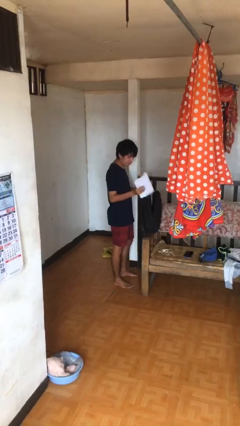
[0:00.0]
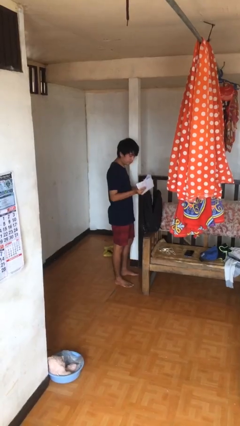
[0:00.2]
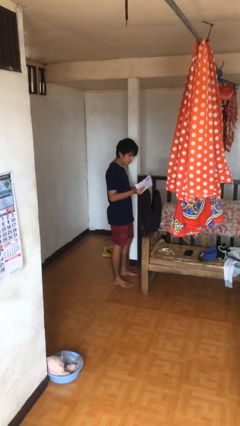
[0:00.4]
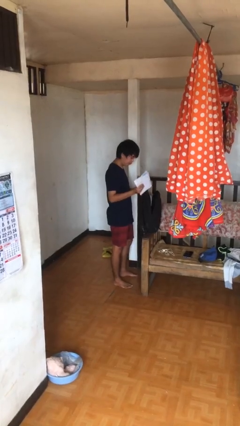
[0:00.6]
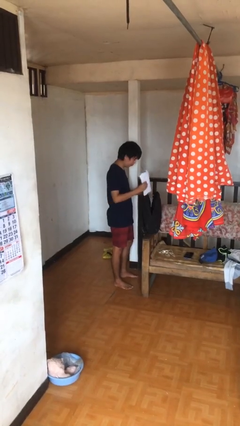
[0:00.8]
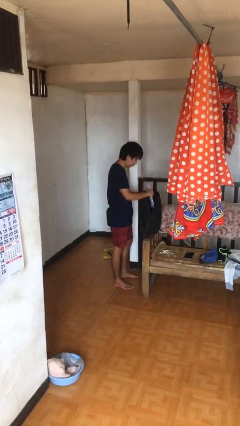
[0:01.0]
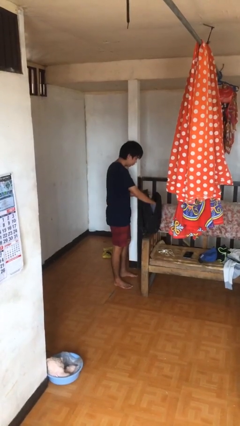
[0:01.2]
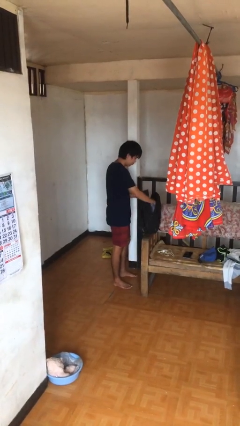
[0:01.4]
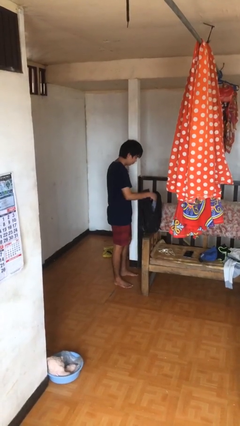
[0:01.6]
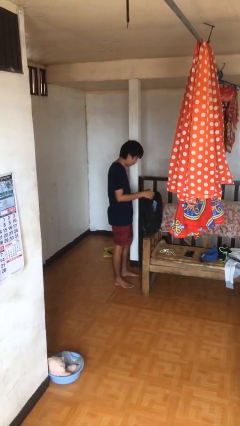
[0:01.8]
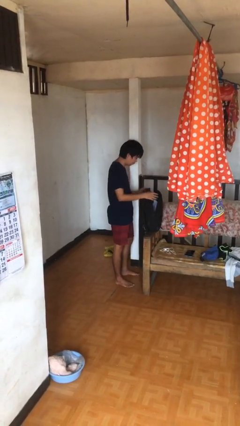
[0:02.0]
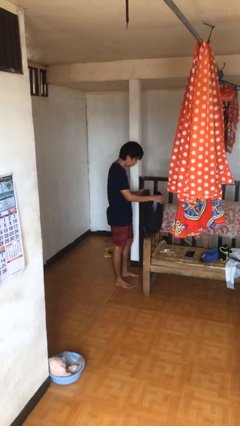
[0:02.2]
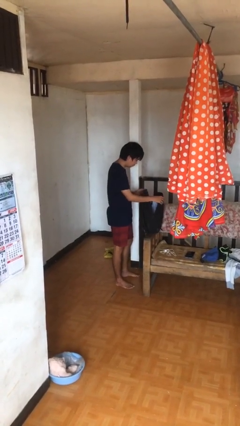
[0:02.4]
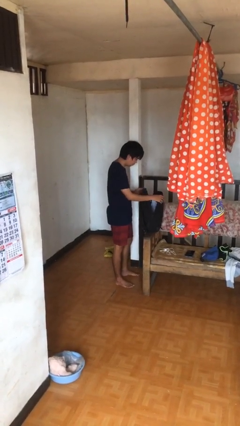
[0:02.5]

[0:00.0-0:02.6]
person puts object into backpack

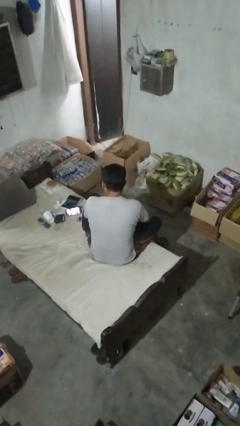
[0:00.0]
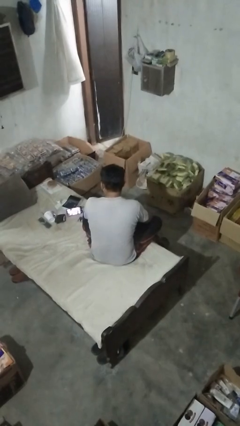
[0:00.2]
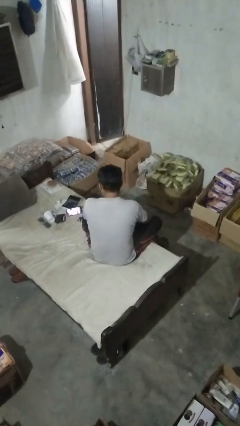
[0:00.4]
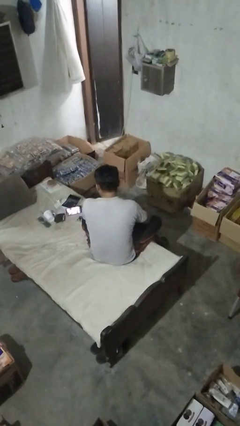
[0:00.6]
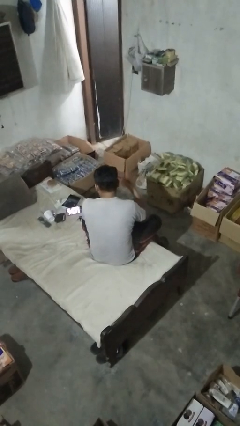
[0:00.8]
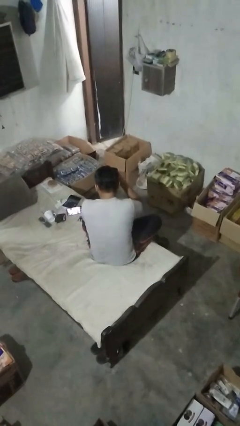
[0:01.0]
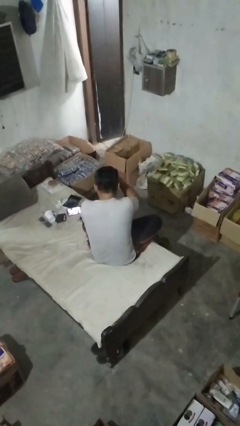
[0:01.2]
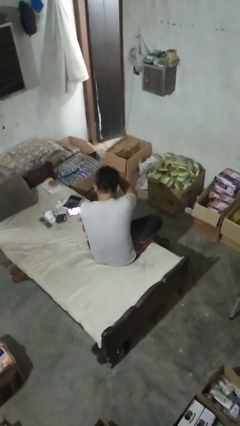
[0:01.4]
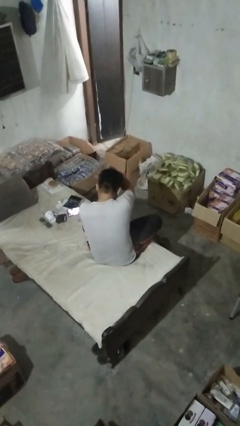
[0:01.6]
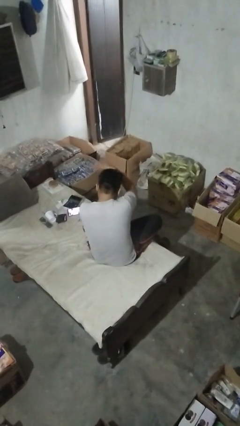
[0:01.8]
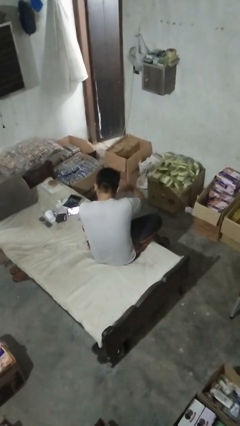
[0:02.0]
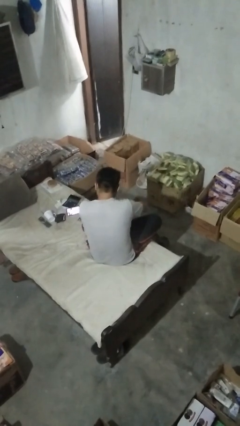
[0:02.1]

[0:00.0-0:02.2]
person strokes hair

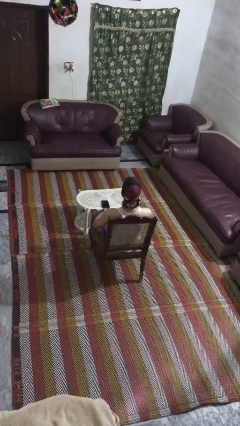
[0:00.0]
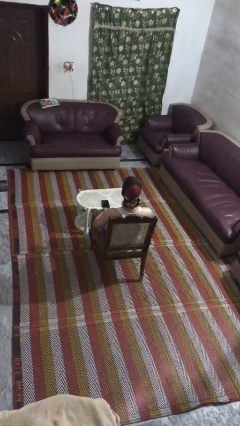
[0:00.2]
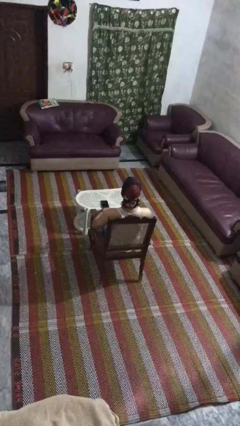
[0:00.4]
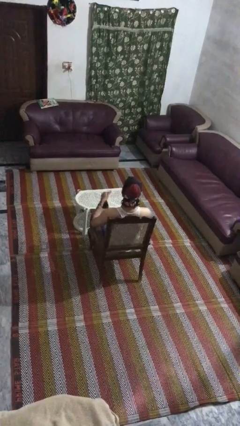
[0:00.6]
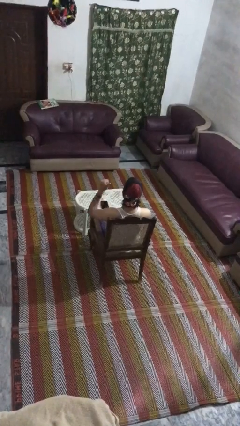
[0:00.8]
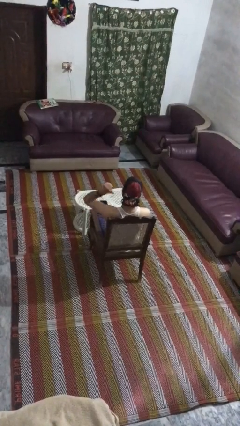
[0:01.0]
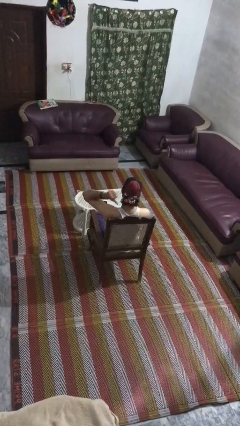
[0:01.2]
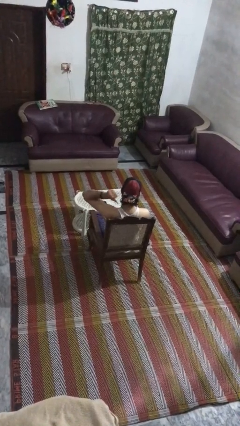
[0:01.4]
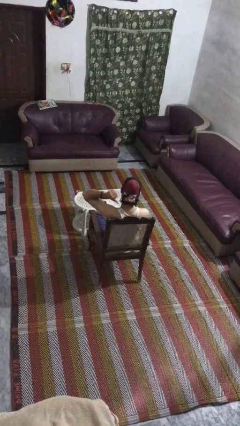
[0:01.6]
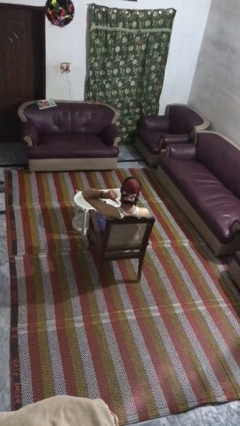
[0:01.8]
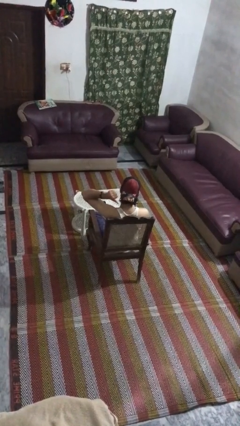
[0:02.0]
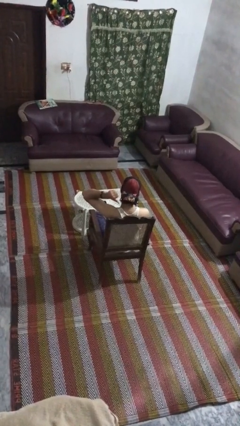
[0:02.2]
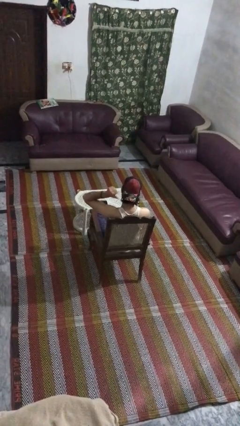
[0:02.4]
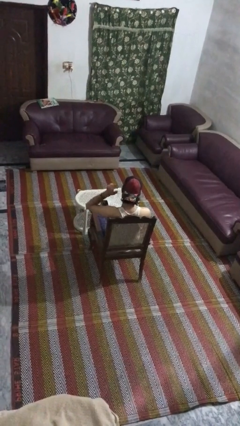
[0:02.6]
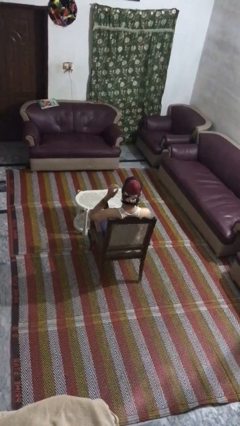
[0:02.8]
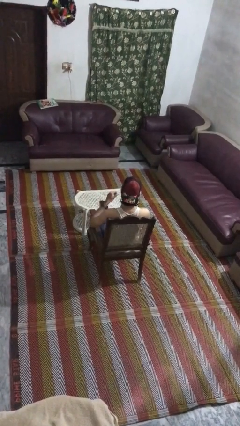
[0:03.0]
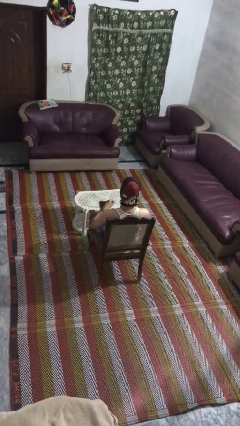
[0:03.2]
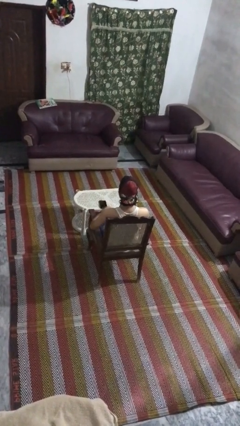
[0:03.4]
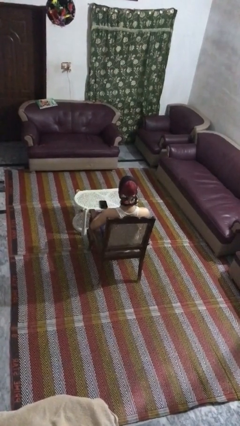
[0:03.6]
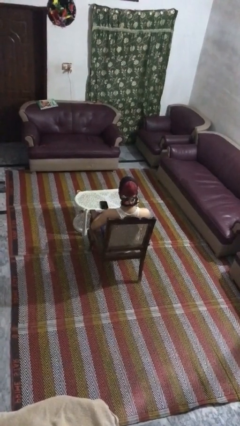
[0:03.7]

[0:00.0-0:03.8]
person gestures behind me

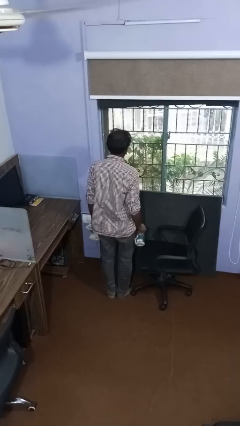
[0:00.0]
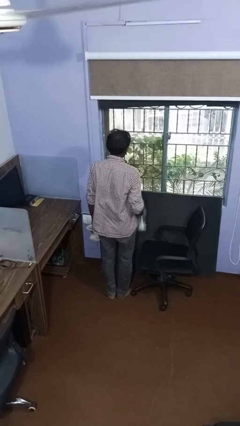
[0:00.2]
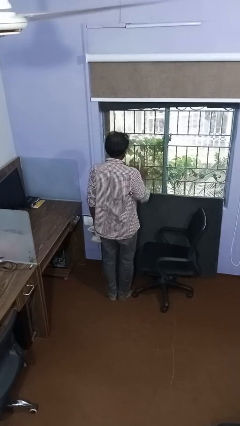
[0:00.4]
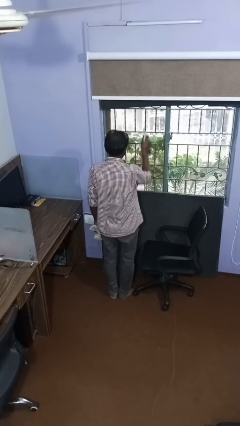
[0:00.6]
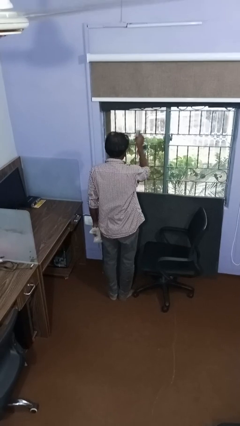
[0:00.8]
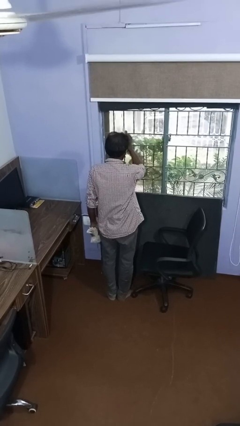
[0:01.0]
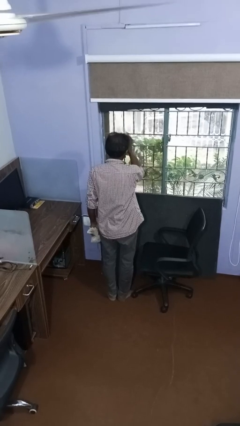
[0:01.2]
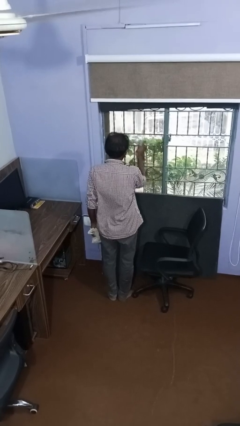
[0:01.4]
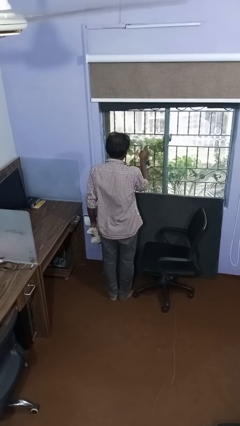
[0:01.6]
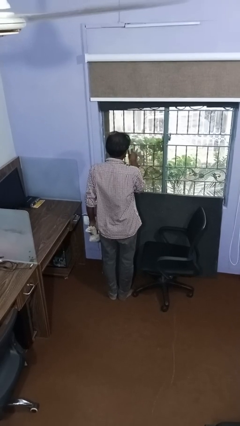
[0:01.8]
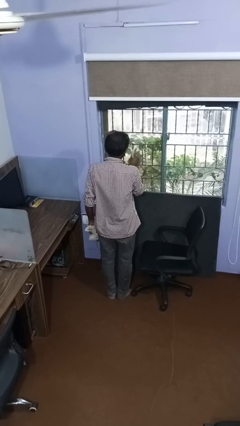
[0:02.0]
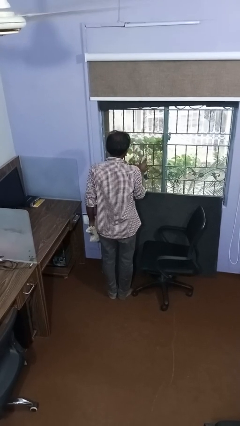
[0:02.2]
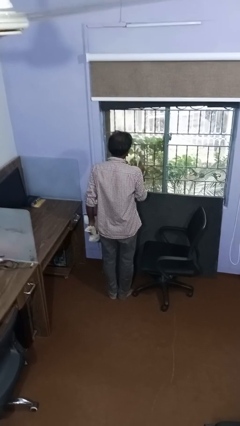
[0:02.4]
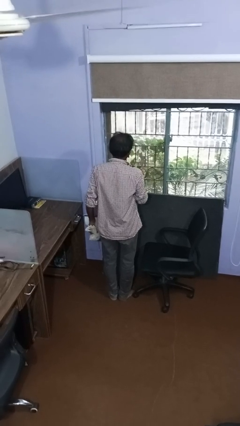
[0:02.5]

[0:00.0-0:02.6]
person sprays from bottle

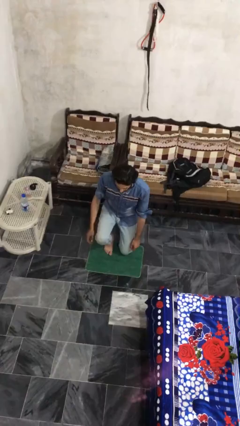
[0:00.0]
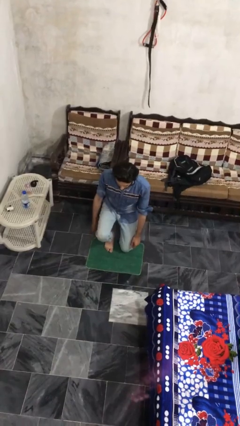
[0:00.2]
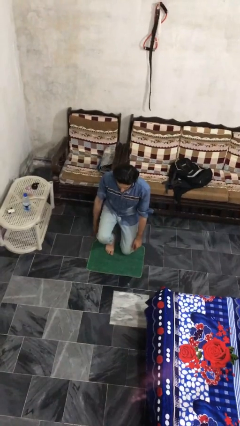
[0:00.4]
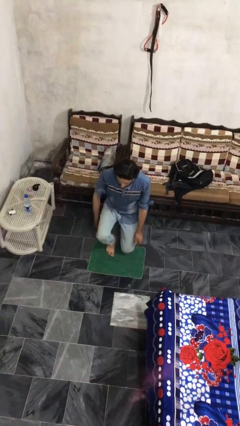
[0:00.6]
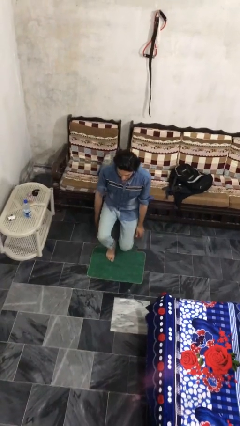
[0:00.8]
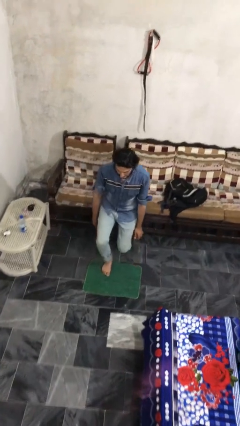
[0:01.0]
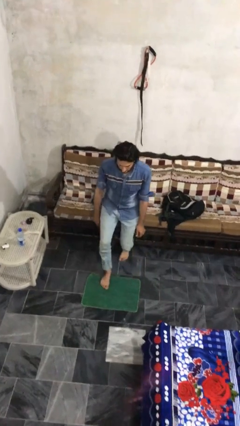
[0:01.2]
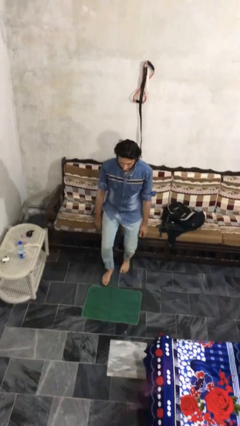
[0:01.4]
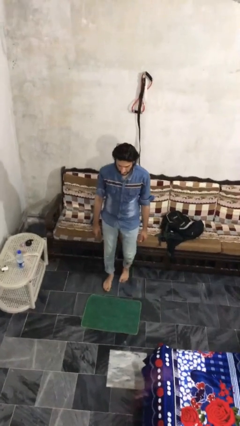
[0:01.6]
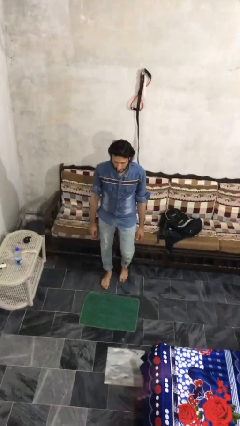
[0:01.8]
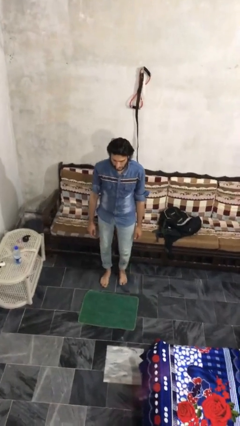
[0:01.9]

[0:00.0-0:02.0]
person stands up from floor

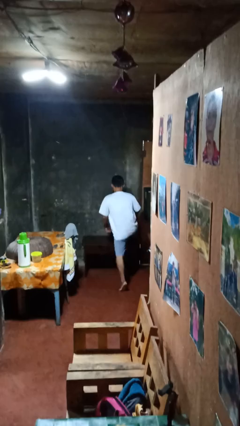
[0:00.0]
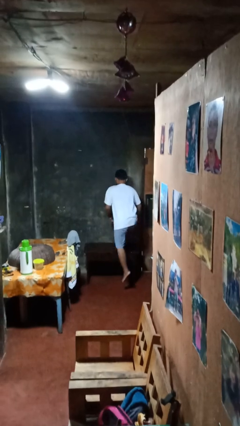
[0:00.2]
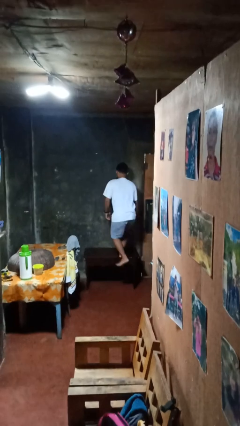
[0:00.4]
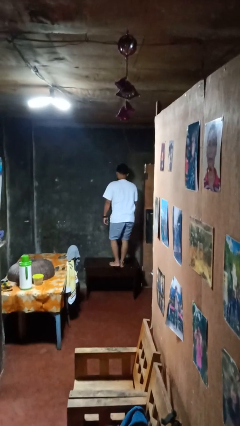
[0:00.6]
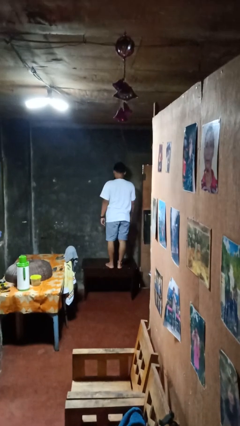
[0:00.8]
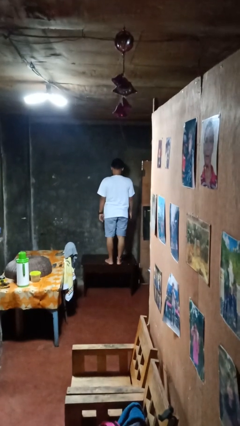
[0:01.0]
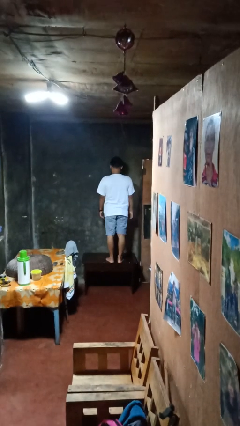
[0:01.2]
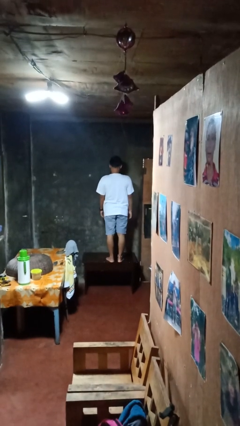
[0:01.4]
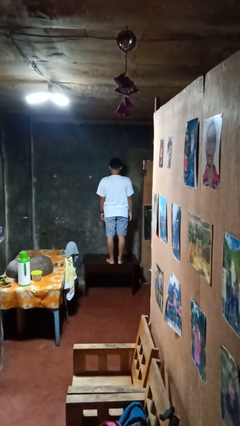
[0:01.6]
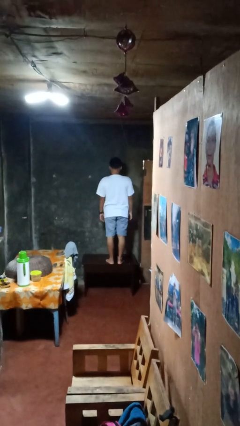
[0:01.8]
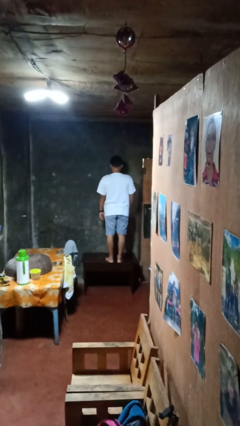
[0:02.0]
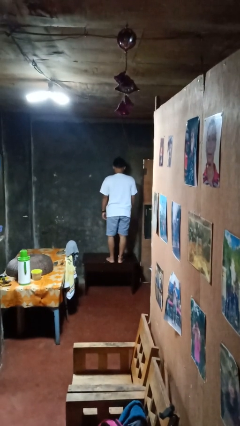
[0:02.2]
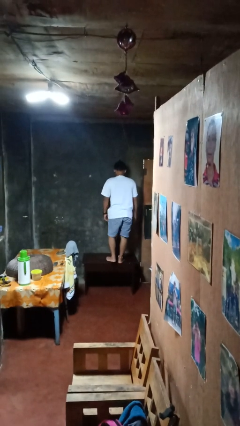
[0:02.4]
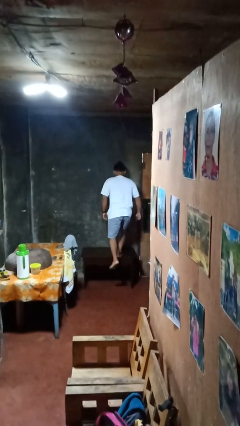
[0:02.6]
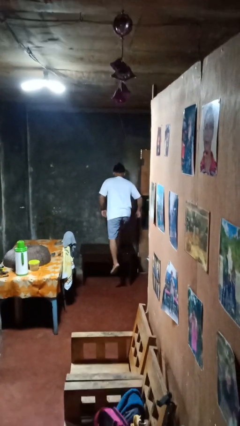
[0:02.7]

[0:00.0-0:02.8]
person climbs on table

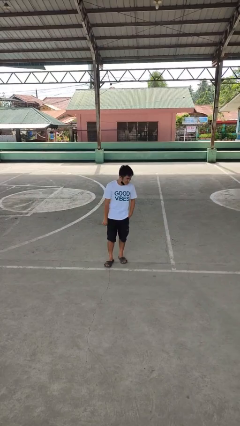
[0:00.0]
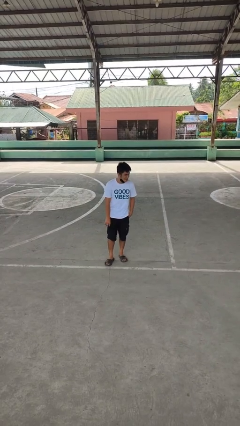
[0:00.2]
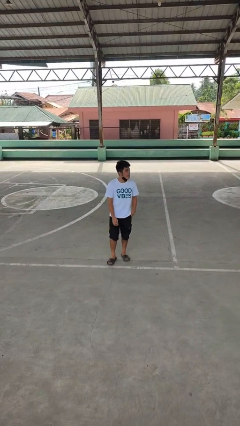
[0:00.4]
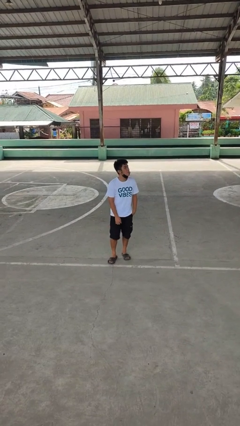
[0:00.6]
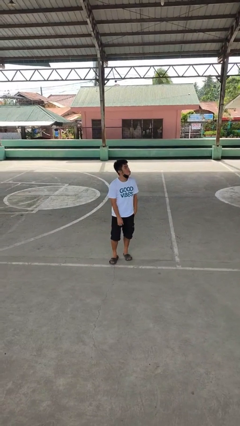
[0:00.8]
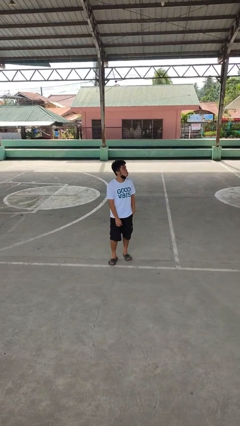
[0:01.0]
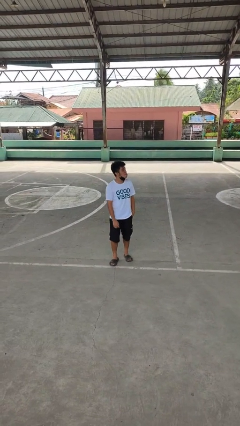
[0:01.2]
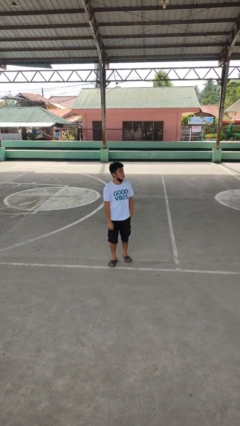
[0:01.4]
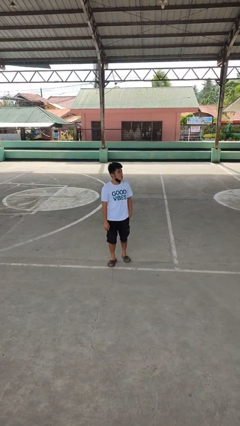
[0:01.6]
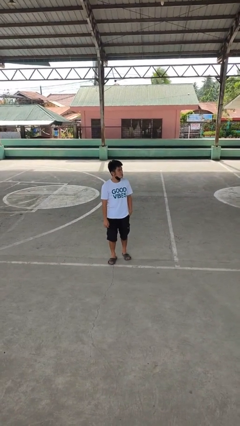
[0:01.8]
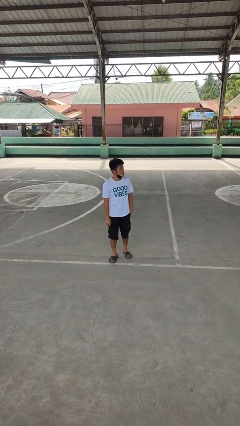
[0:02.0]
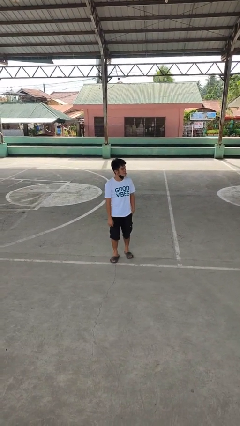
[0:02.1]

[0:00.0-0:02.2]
person sticks out tongue
